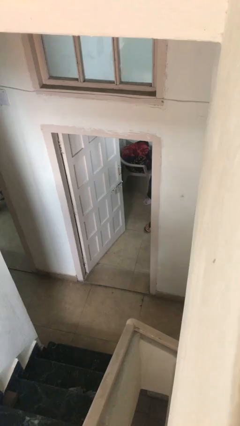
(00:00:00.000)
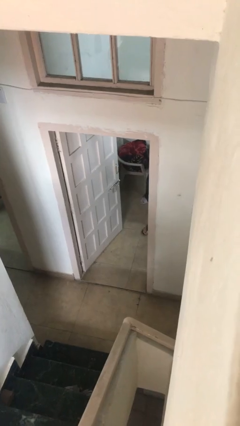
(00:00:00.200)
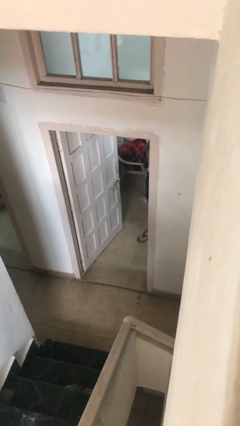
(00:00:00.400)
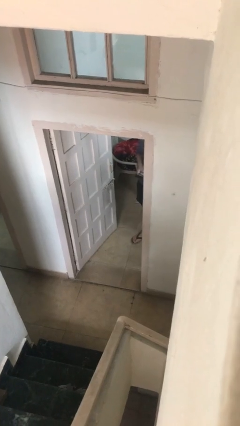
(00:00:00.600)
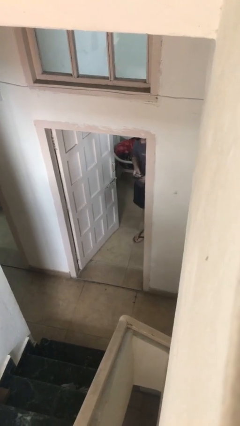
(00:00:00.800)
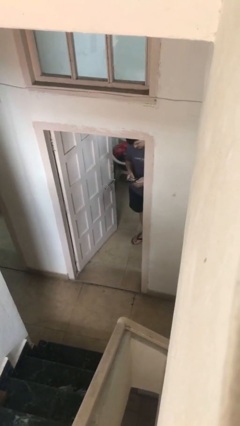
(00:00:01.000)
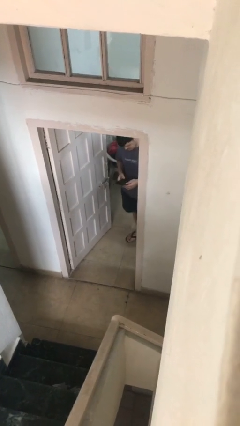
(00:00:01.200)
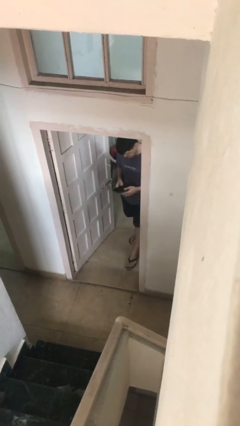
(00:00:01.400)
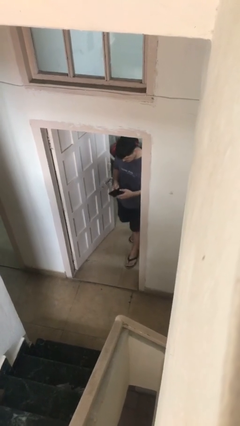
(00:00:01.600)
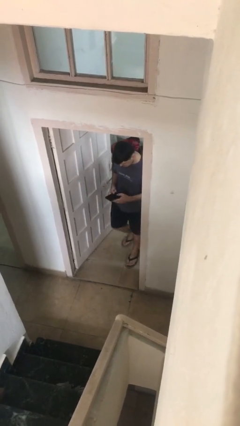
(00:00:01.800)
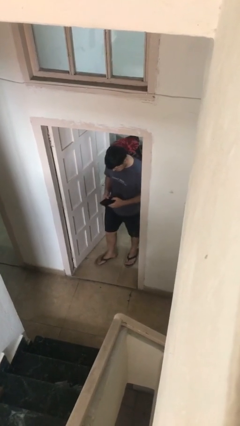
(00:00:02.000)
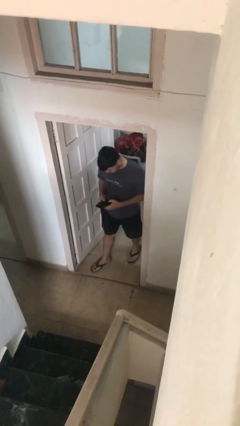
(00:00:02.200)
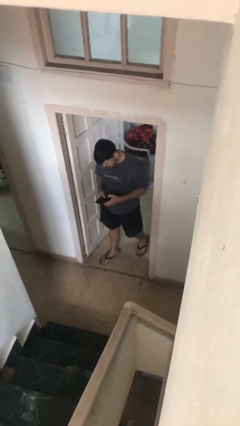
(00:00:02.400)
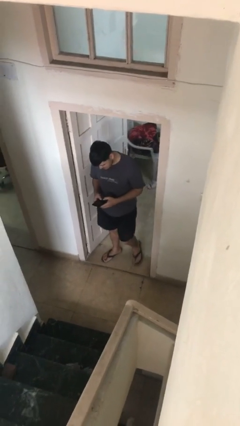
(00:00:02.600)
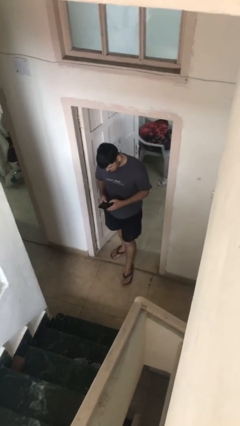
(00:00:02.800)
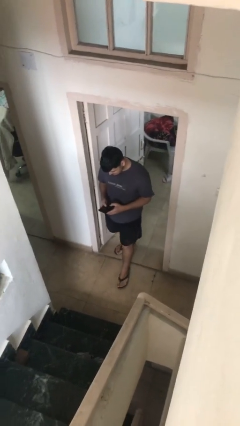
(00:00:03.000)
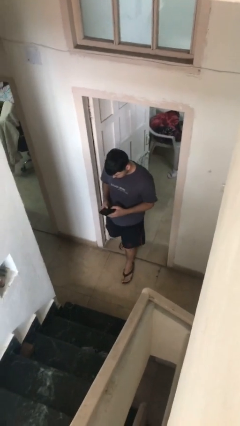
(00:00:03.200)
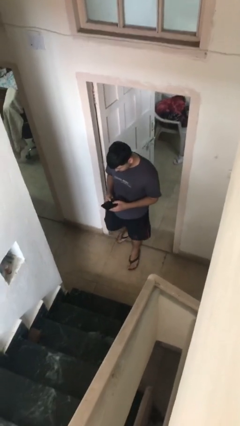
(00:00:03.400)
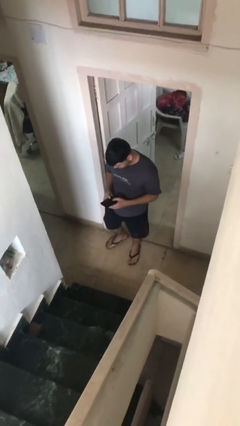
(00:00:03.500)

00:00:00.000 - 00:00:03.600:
person enters scene through structure

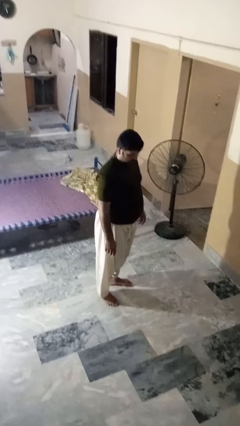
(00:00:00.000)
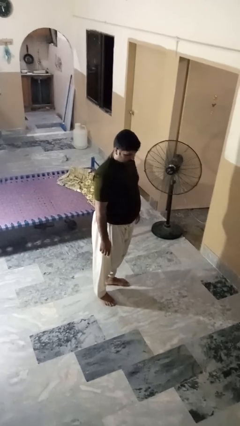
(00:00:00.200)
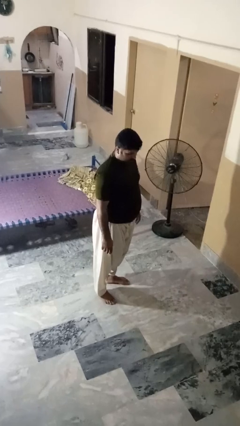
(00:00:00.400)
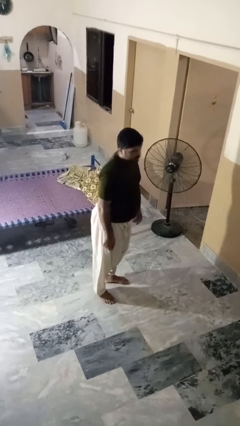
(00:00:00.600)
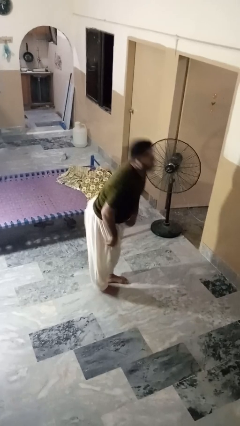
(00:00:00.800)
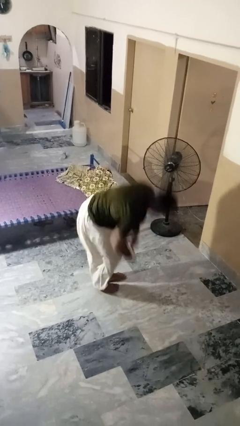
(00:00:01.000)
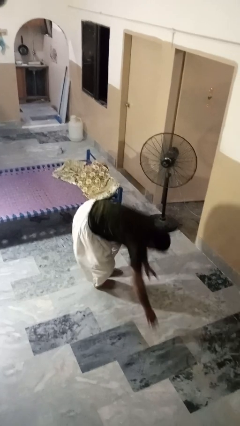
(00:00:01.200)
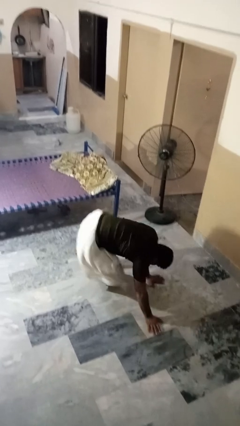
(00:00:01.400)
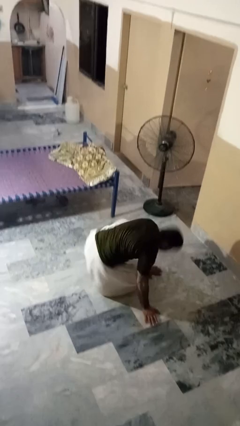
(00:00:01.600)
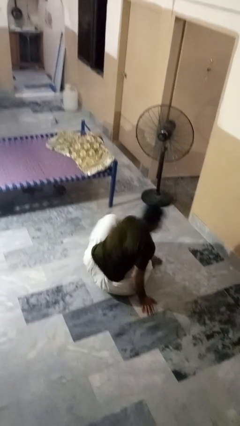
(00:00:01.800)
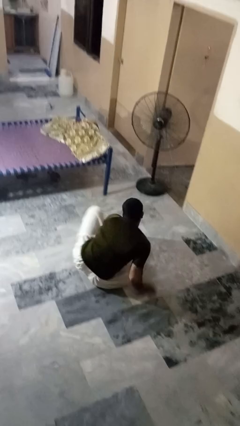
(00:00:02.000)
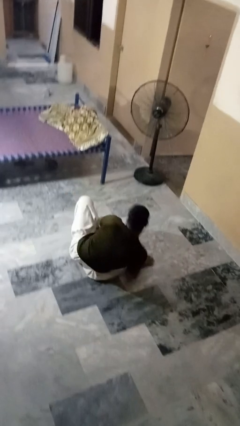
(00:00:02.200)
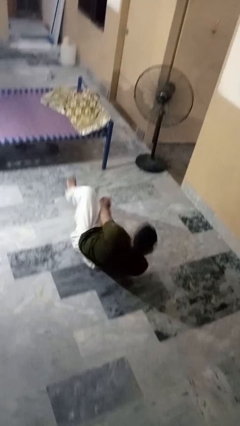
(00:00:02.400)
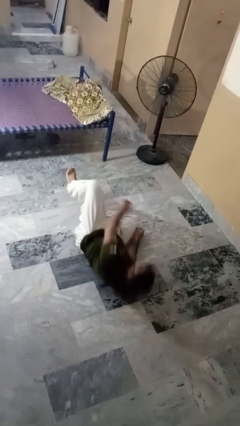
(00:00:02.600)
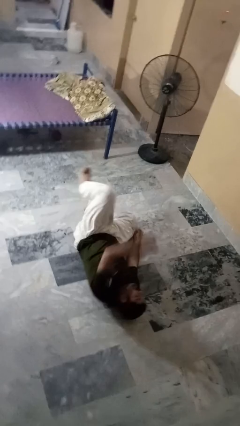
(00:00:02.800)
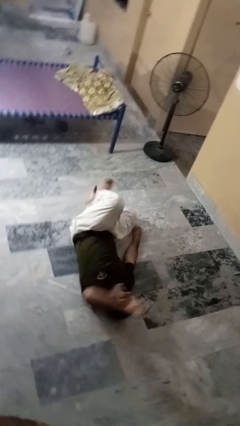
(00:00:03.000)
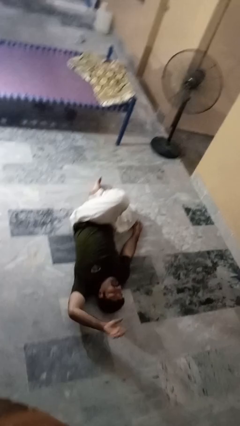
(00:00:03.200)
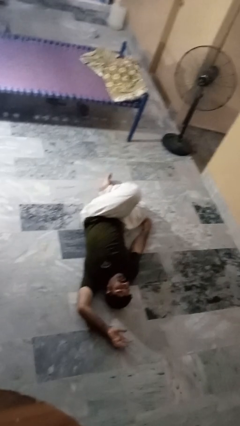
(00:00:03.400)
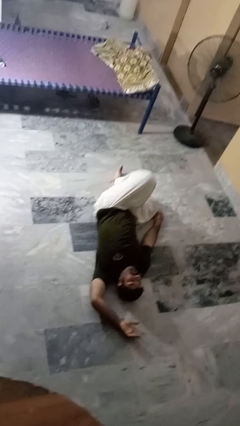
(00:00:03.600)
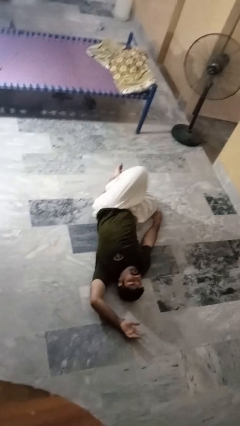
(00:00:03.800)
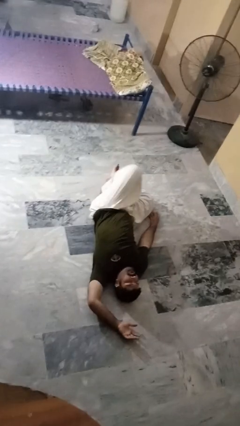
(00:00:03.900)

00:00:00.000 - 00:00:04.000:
person falls while standing

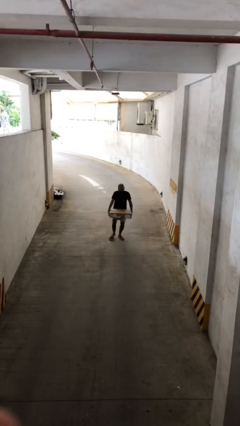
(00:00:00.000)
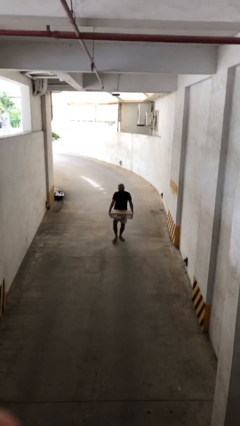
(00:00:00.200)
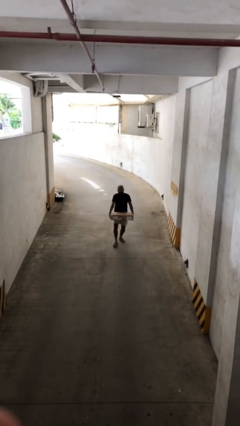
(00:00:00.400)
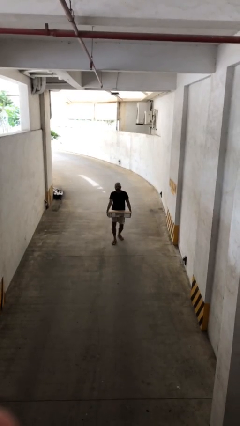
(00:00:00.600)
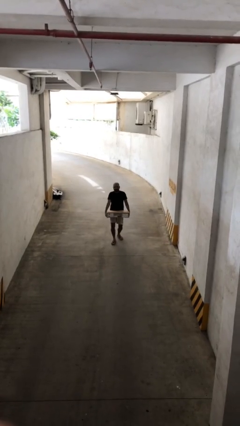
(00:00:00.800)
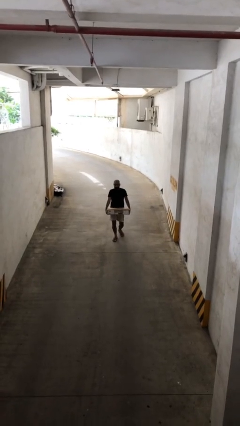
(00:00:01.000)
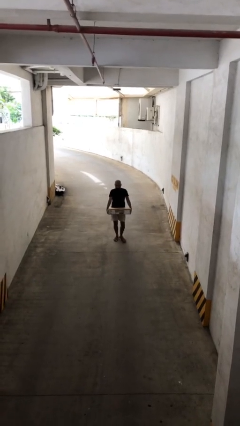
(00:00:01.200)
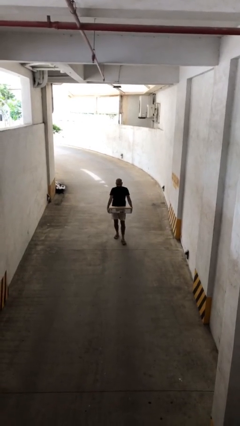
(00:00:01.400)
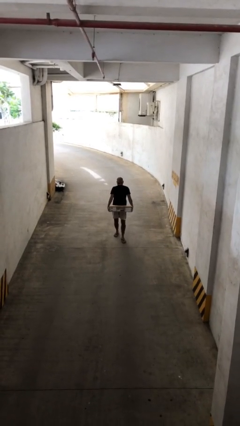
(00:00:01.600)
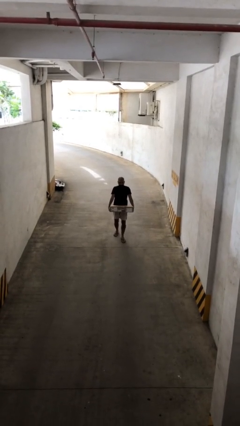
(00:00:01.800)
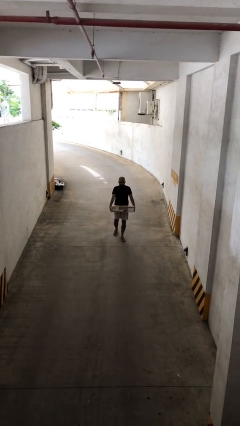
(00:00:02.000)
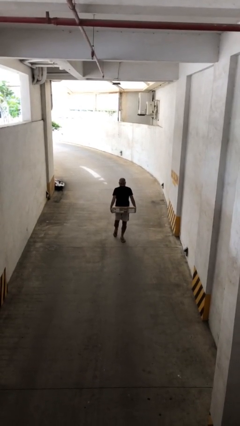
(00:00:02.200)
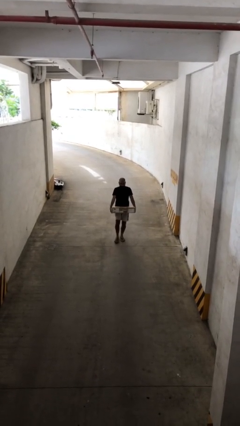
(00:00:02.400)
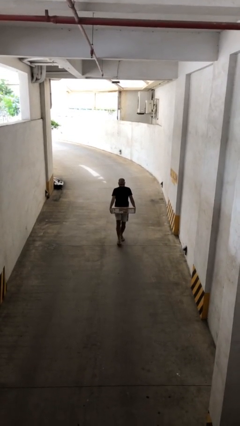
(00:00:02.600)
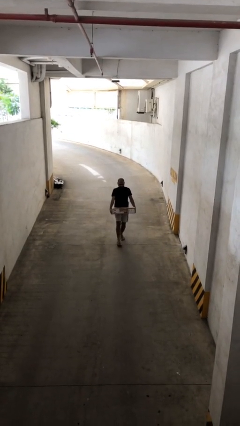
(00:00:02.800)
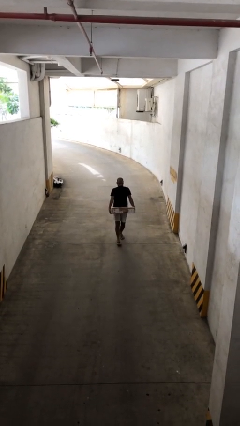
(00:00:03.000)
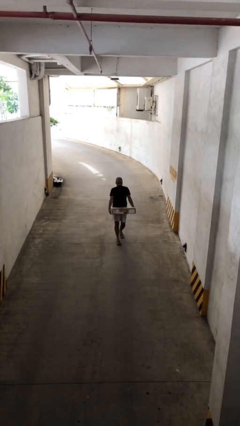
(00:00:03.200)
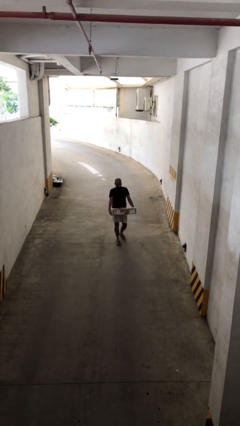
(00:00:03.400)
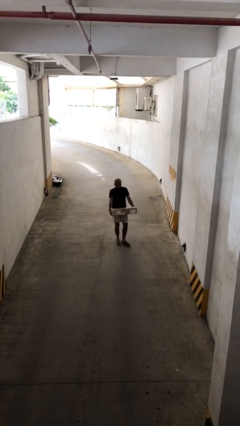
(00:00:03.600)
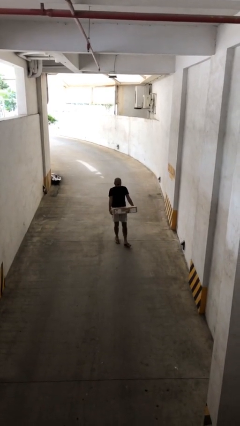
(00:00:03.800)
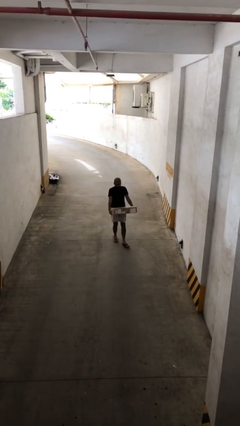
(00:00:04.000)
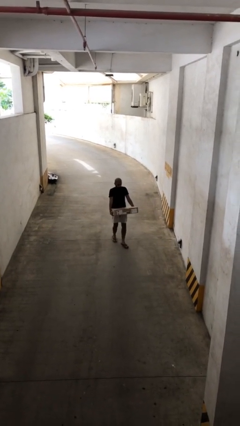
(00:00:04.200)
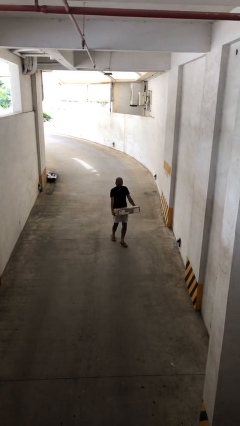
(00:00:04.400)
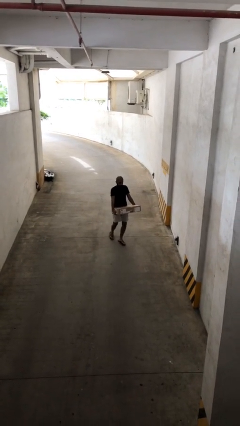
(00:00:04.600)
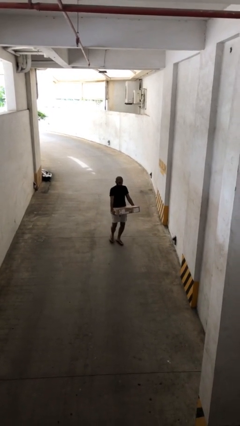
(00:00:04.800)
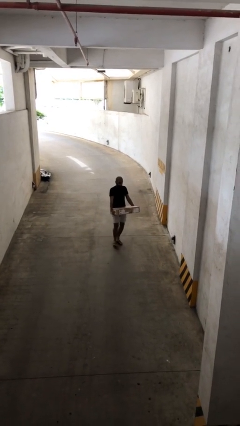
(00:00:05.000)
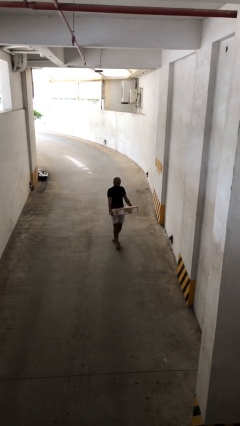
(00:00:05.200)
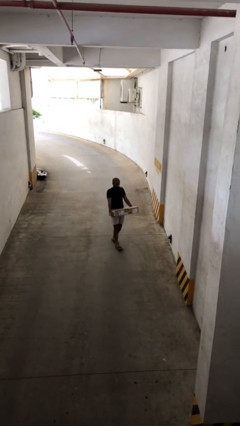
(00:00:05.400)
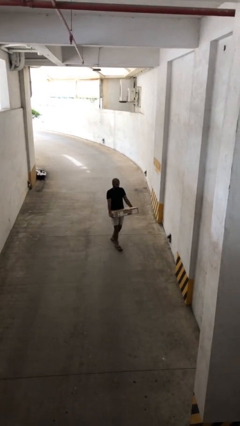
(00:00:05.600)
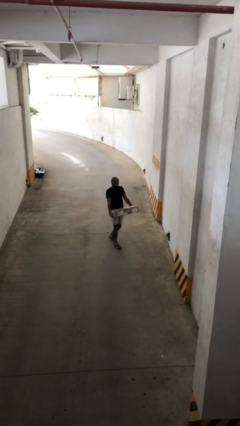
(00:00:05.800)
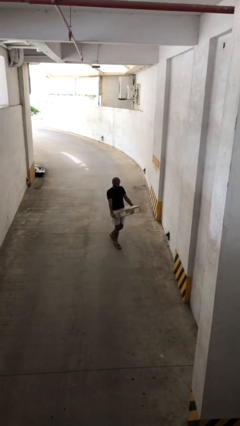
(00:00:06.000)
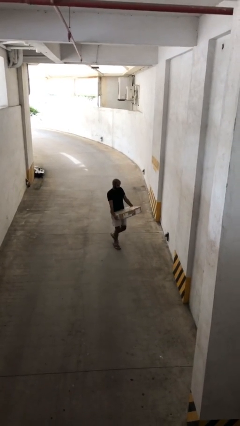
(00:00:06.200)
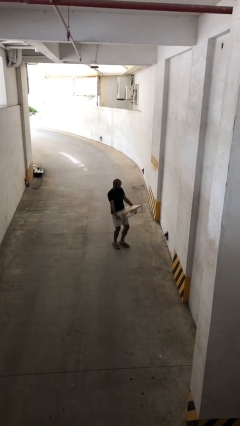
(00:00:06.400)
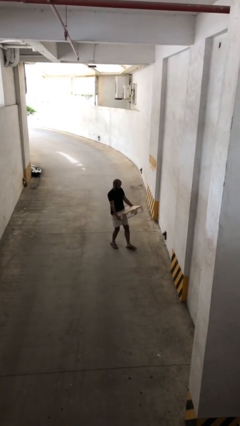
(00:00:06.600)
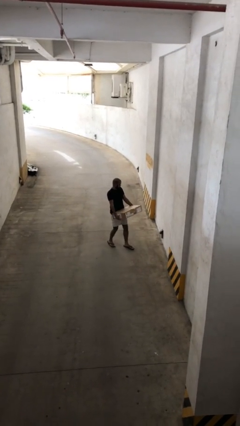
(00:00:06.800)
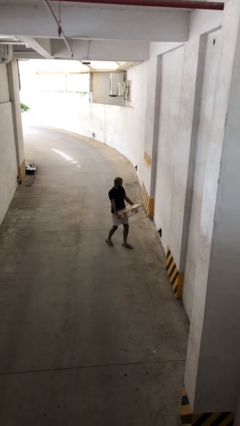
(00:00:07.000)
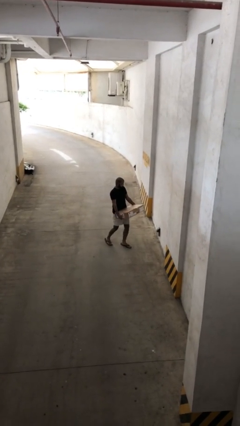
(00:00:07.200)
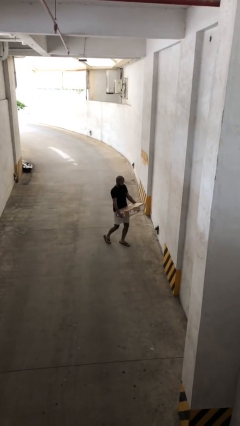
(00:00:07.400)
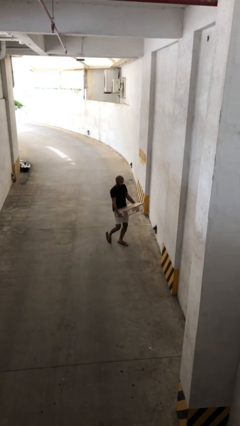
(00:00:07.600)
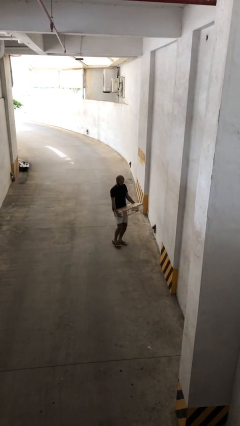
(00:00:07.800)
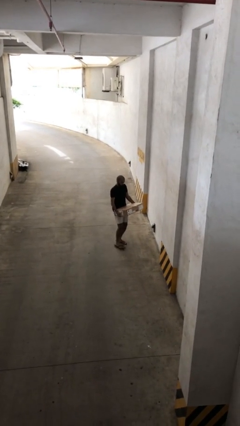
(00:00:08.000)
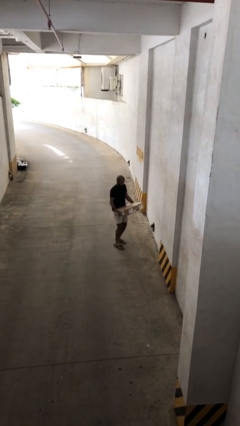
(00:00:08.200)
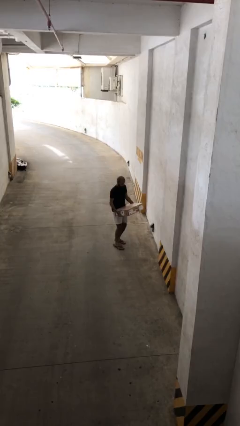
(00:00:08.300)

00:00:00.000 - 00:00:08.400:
person carries heavy object

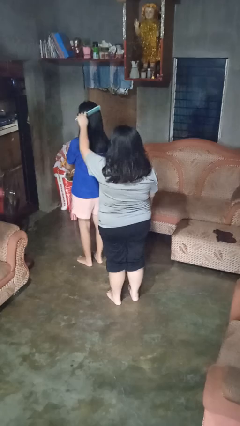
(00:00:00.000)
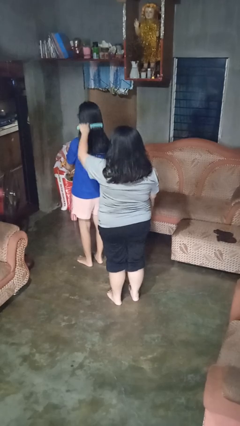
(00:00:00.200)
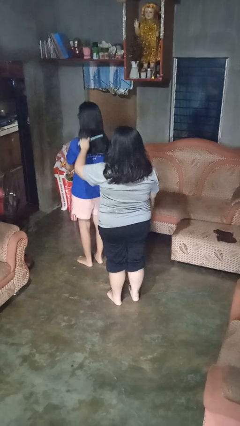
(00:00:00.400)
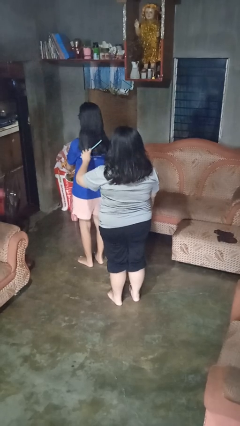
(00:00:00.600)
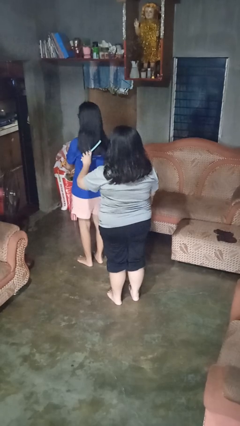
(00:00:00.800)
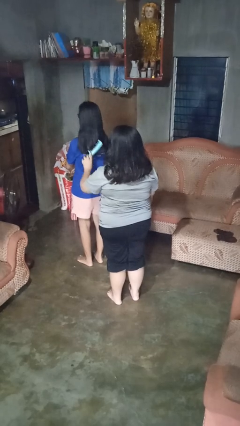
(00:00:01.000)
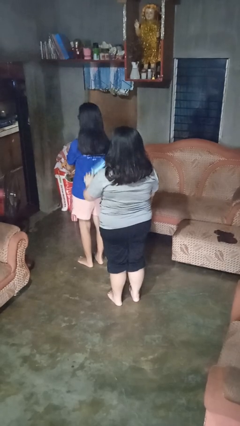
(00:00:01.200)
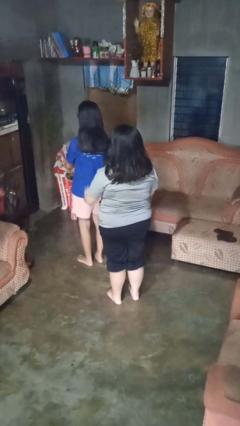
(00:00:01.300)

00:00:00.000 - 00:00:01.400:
person brushes hair of person

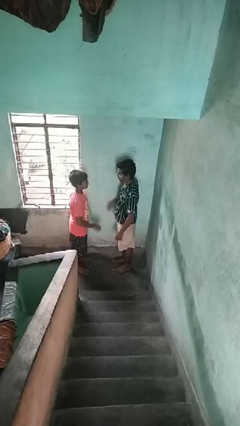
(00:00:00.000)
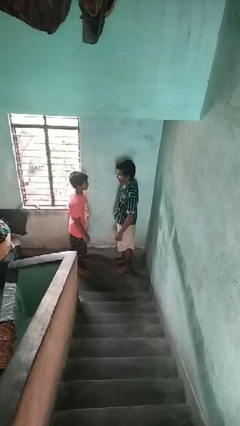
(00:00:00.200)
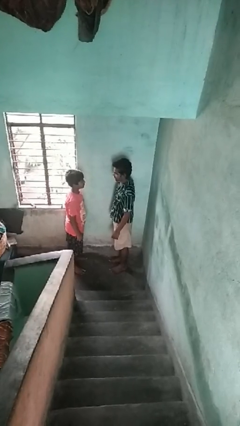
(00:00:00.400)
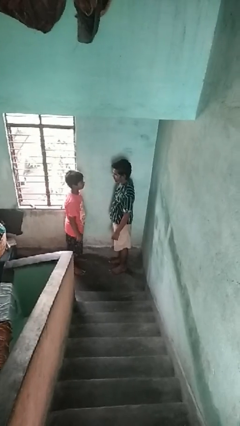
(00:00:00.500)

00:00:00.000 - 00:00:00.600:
person highfives hand
